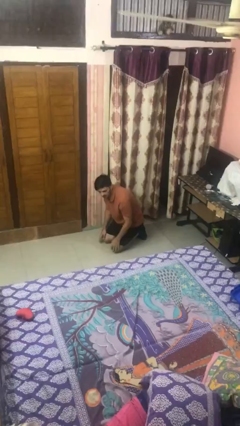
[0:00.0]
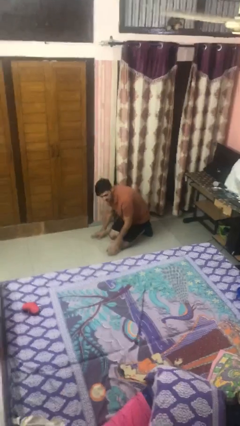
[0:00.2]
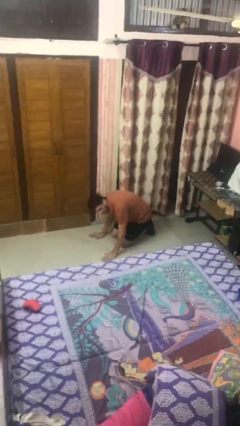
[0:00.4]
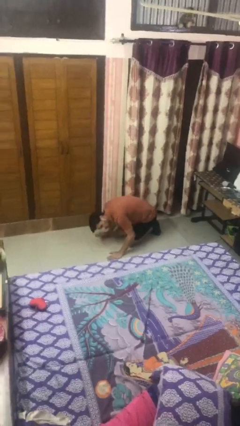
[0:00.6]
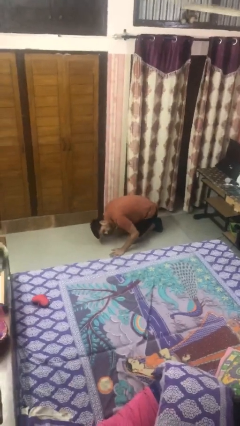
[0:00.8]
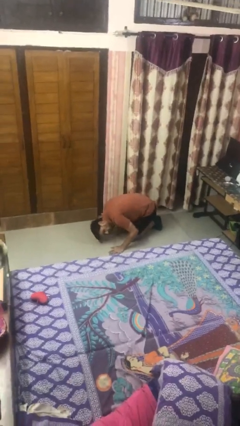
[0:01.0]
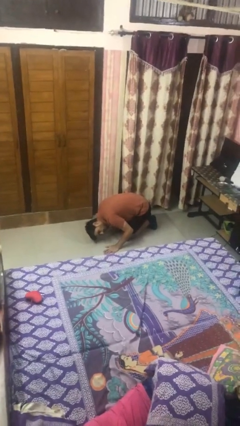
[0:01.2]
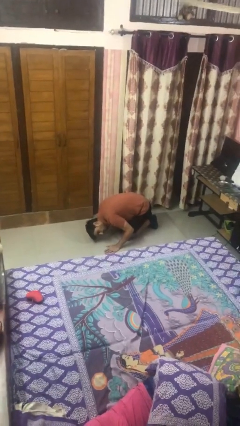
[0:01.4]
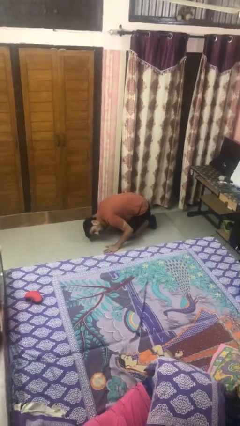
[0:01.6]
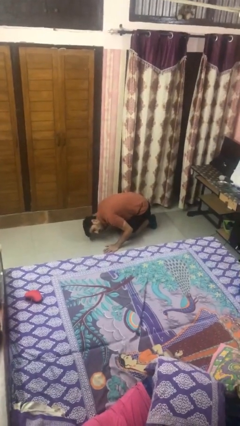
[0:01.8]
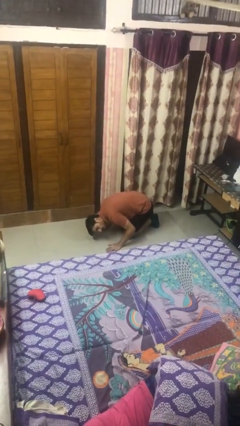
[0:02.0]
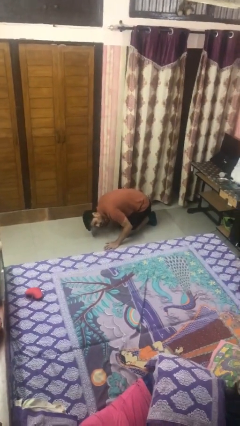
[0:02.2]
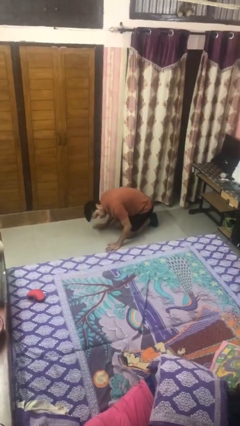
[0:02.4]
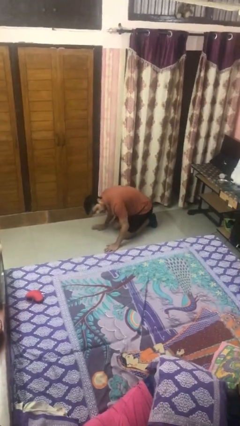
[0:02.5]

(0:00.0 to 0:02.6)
person searches under bed

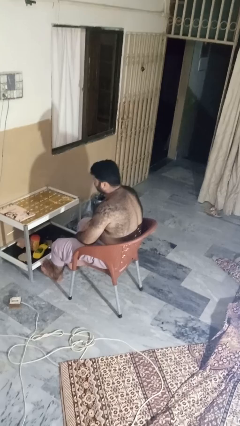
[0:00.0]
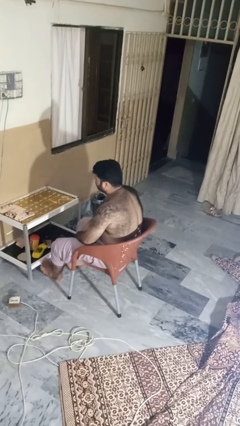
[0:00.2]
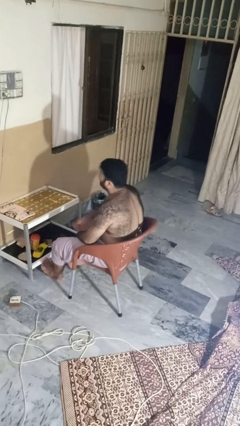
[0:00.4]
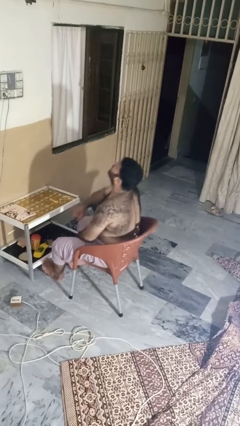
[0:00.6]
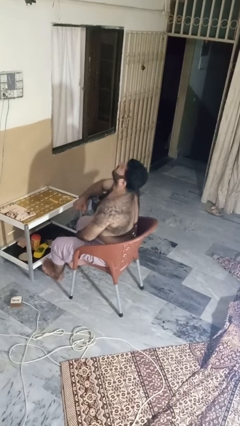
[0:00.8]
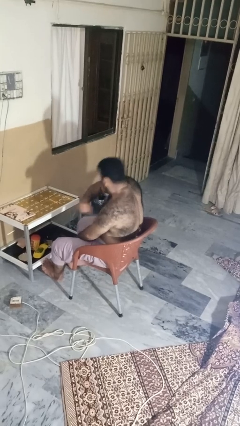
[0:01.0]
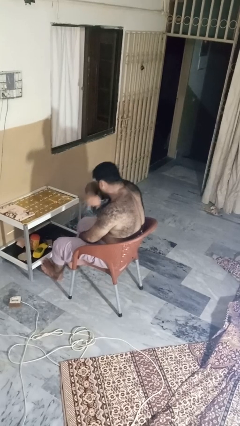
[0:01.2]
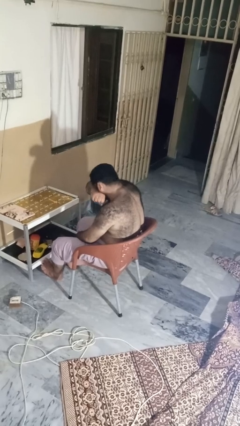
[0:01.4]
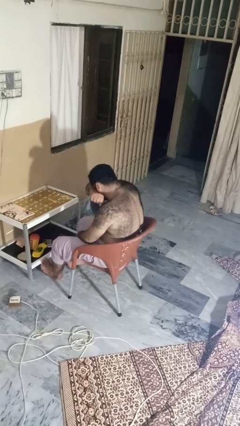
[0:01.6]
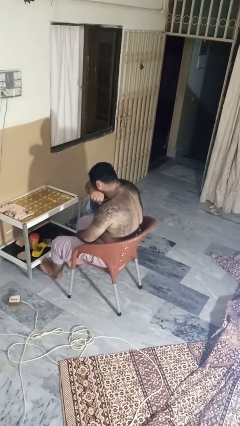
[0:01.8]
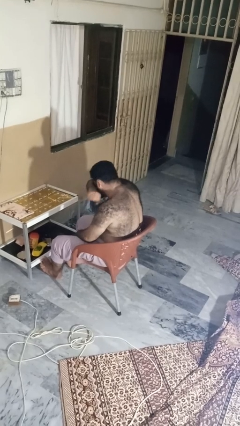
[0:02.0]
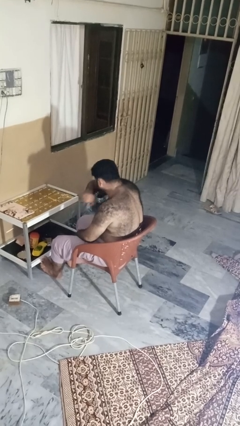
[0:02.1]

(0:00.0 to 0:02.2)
person sneezes into arm

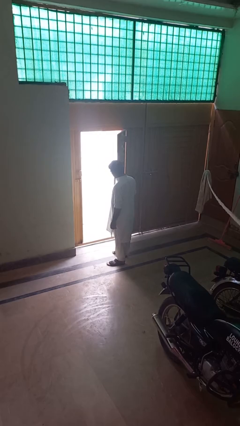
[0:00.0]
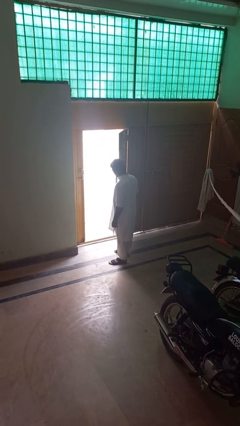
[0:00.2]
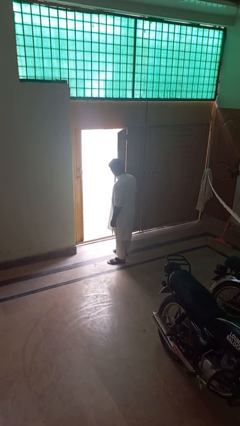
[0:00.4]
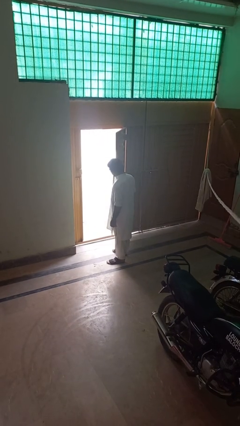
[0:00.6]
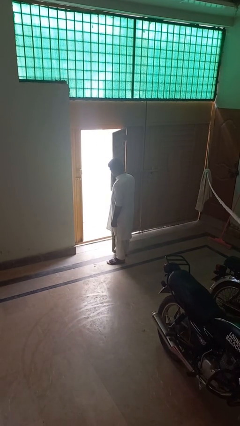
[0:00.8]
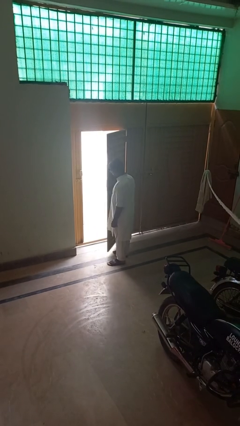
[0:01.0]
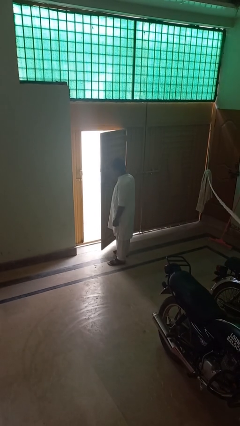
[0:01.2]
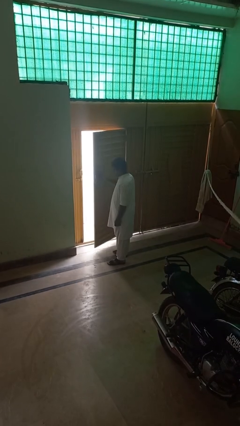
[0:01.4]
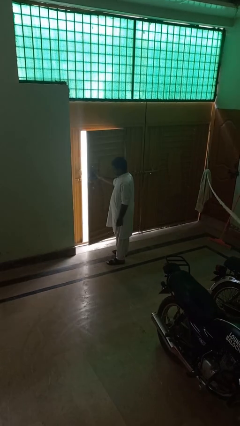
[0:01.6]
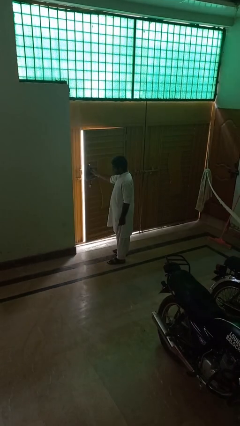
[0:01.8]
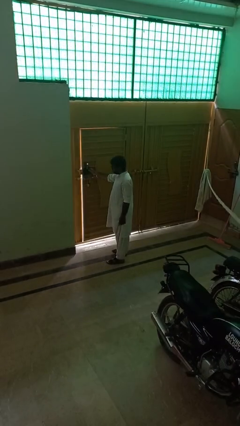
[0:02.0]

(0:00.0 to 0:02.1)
person closes gate

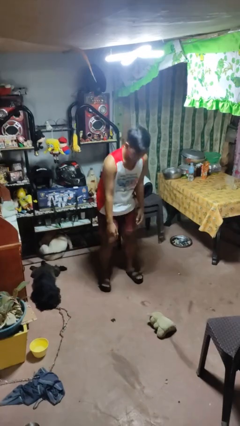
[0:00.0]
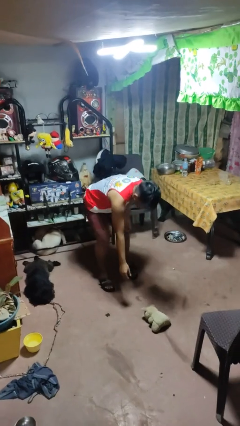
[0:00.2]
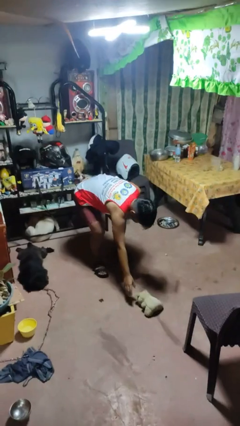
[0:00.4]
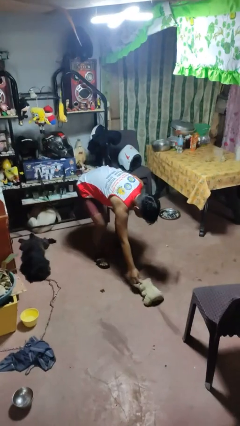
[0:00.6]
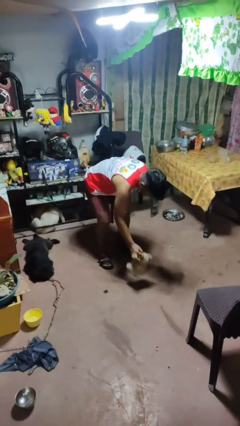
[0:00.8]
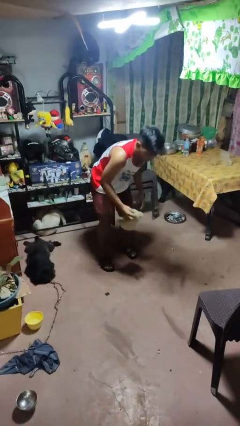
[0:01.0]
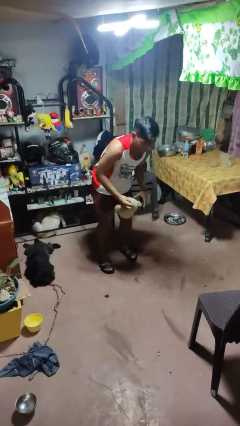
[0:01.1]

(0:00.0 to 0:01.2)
person picks up object from floor

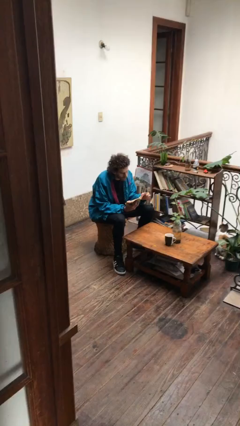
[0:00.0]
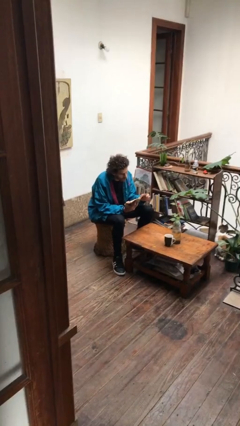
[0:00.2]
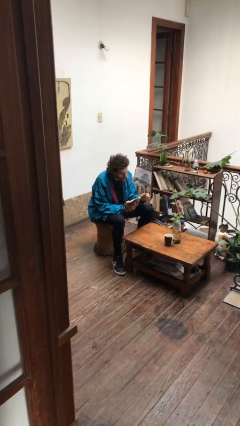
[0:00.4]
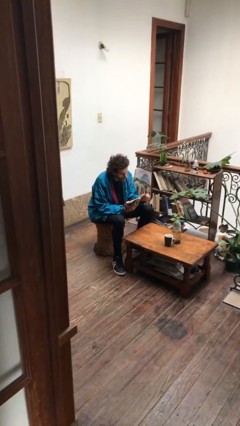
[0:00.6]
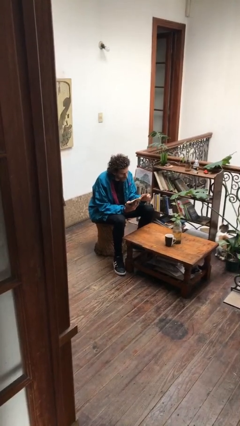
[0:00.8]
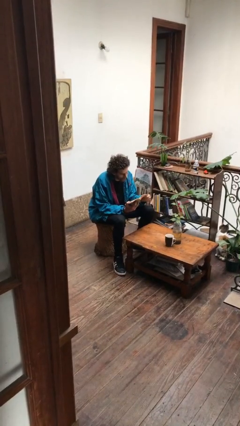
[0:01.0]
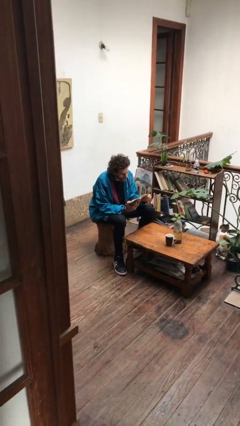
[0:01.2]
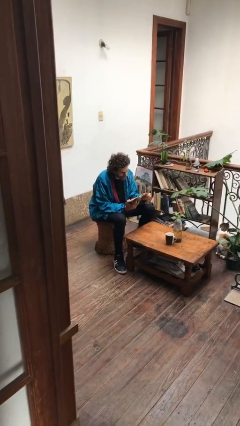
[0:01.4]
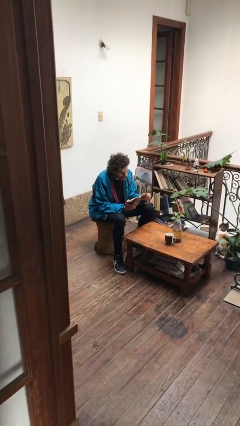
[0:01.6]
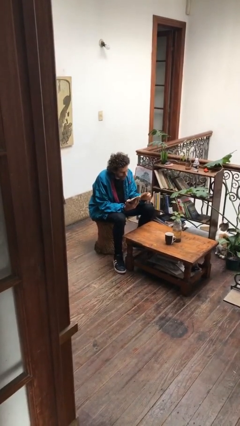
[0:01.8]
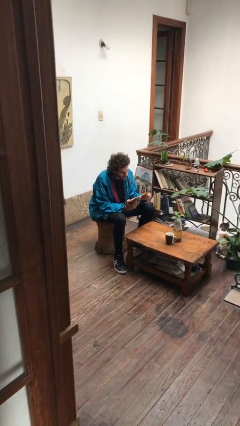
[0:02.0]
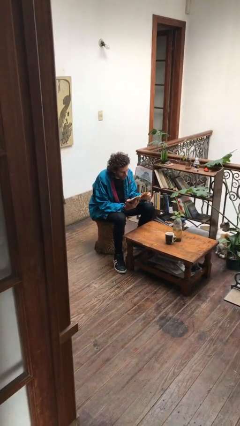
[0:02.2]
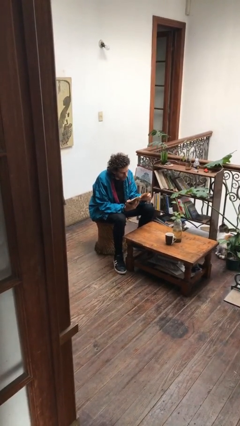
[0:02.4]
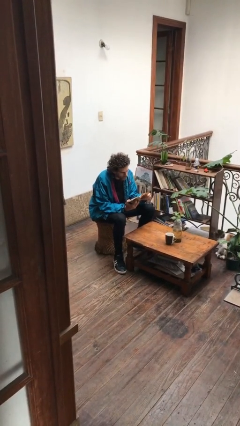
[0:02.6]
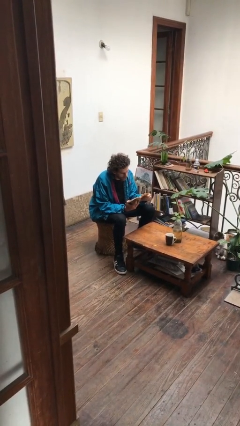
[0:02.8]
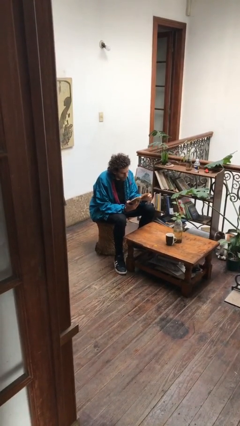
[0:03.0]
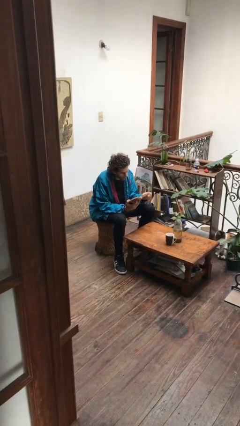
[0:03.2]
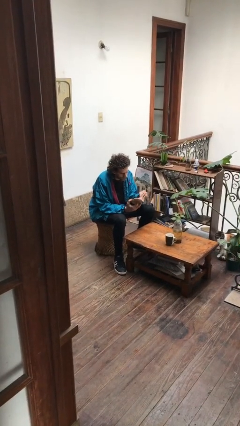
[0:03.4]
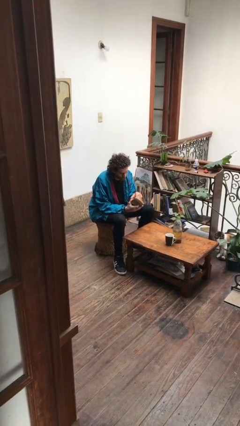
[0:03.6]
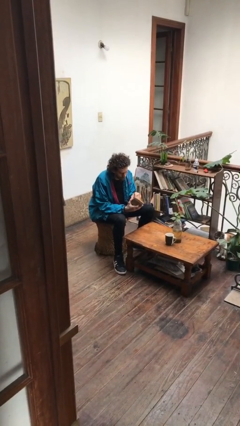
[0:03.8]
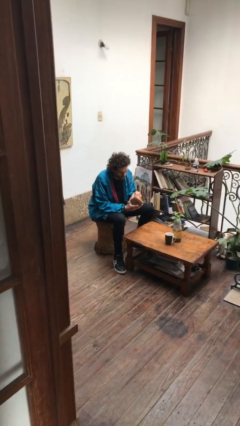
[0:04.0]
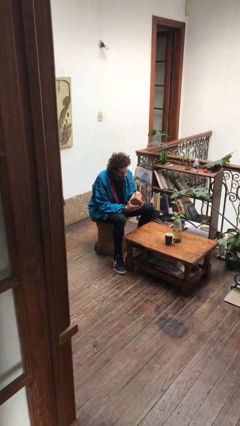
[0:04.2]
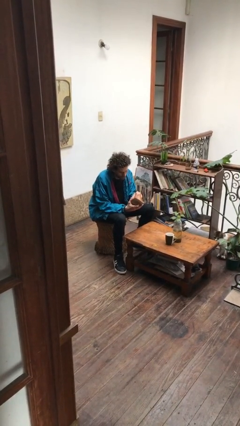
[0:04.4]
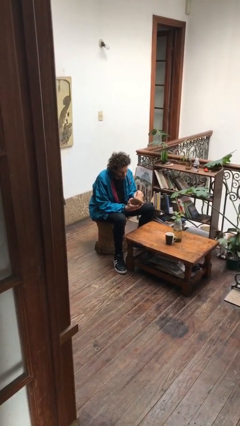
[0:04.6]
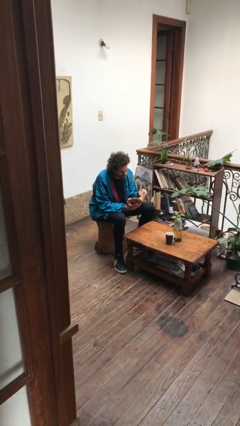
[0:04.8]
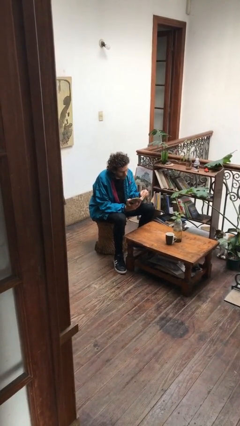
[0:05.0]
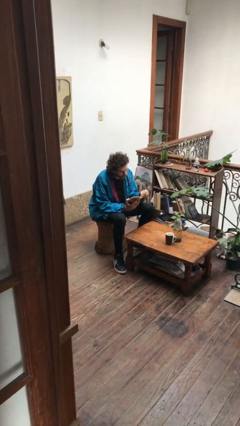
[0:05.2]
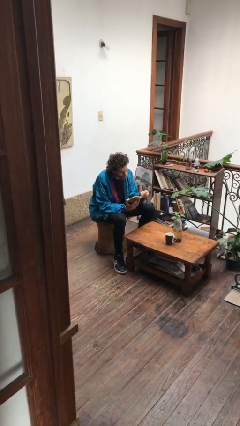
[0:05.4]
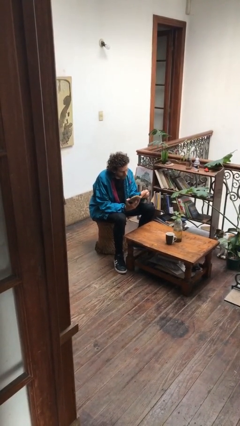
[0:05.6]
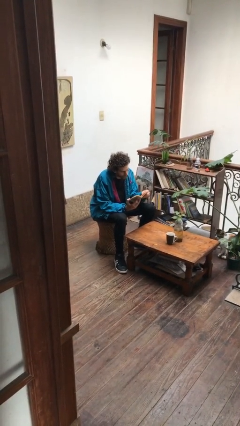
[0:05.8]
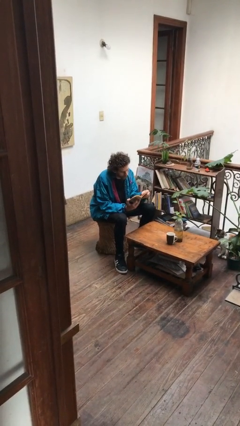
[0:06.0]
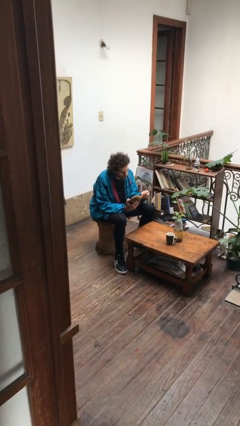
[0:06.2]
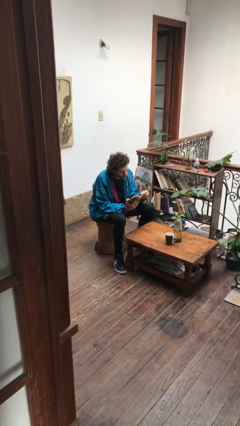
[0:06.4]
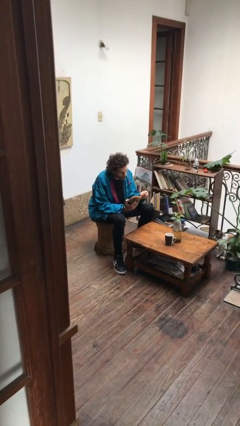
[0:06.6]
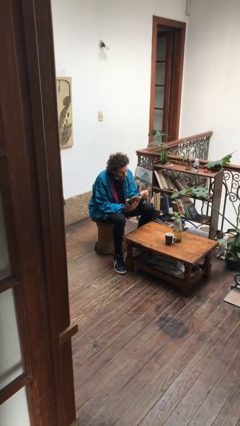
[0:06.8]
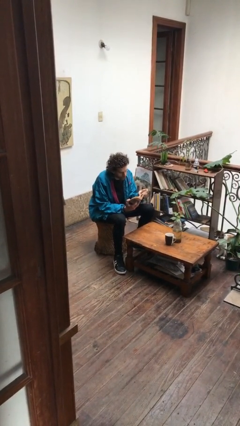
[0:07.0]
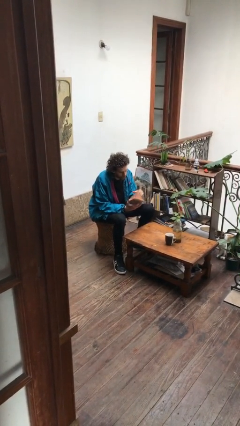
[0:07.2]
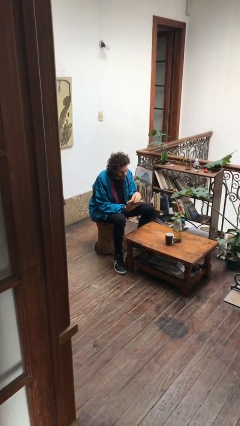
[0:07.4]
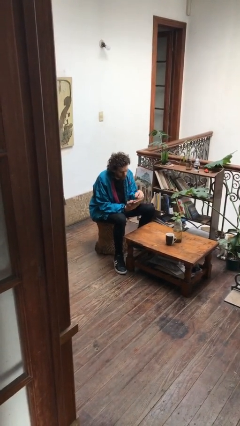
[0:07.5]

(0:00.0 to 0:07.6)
person reads document

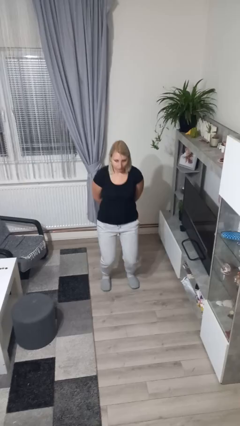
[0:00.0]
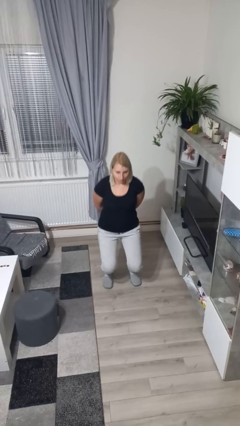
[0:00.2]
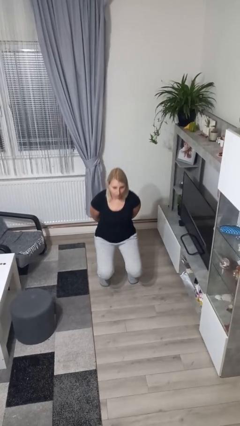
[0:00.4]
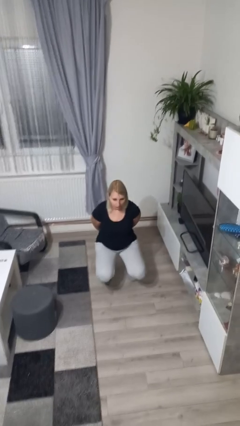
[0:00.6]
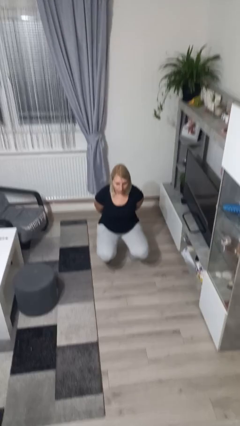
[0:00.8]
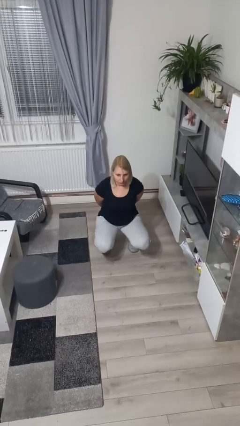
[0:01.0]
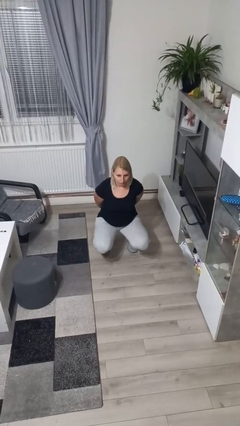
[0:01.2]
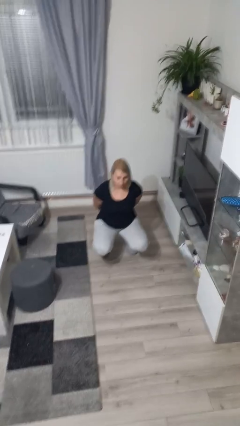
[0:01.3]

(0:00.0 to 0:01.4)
person squats

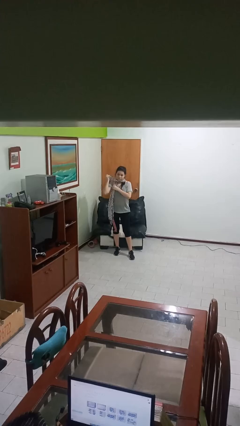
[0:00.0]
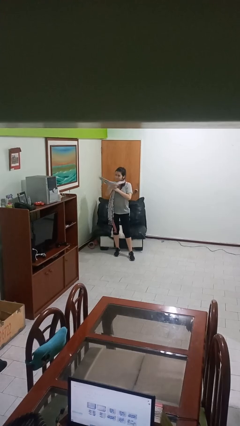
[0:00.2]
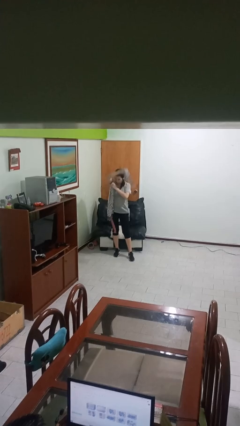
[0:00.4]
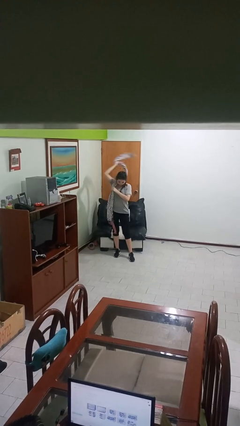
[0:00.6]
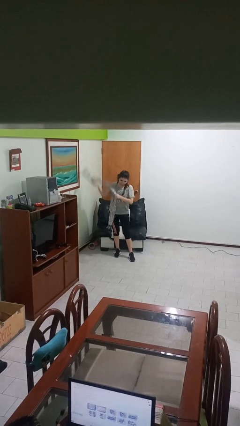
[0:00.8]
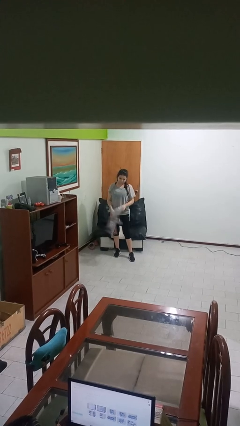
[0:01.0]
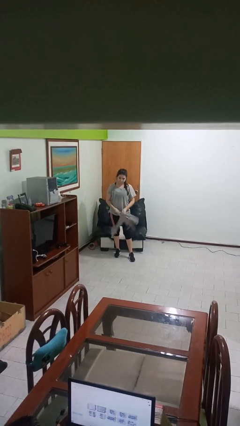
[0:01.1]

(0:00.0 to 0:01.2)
person takes off scarf
